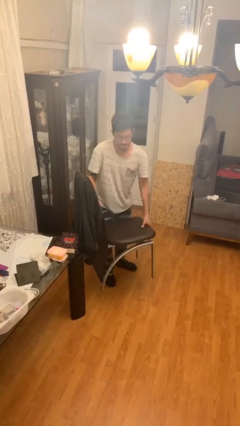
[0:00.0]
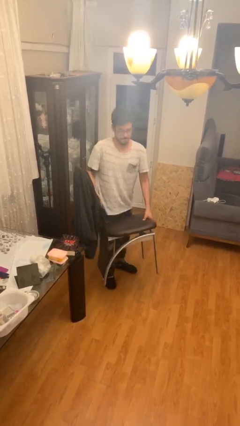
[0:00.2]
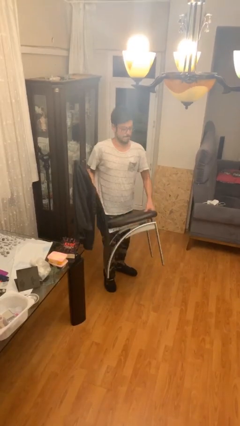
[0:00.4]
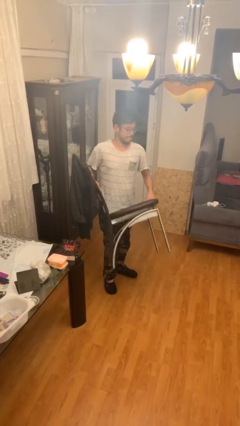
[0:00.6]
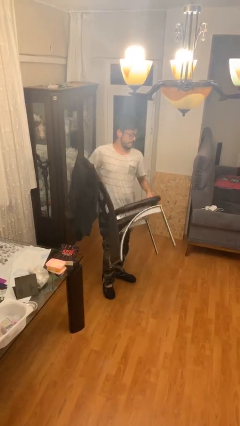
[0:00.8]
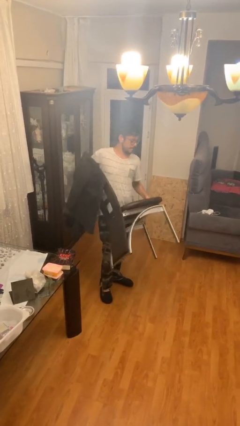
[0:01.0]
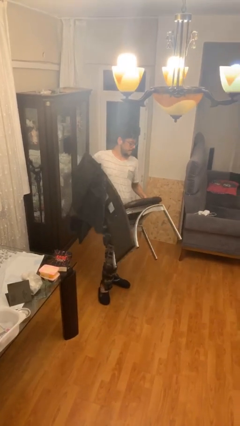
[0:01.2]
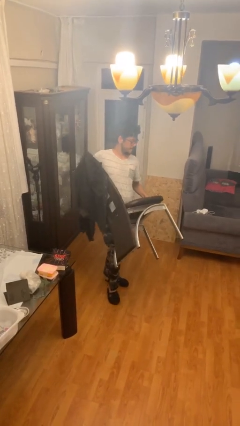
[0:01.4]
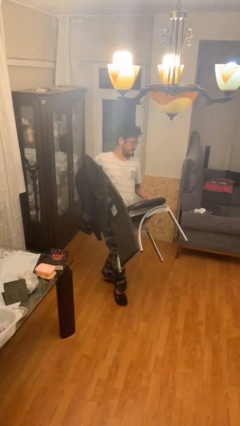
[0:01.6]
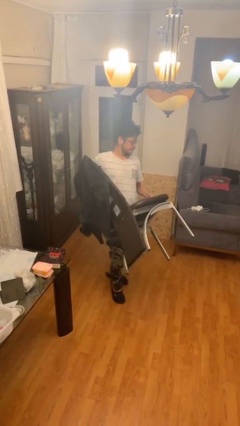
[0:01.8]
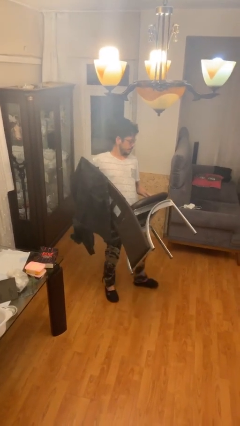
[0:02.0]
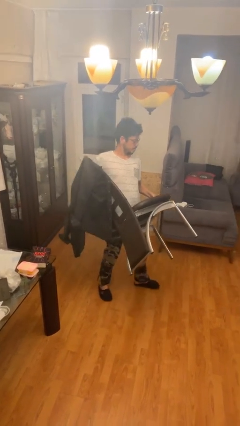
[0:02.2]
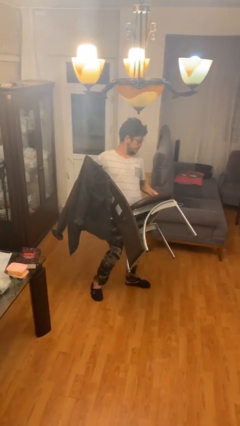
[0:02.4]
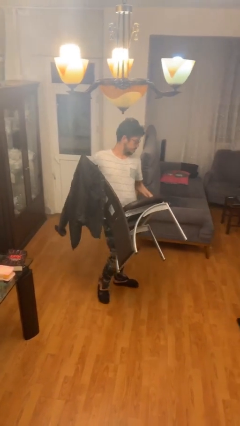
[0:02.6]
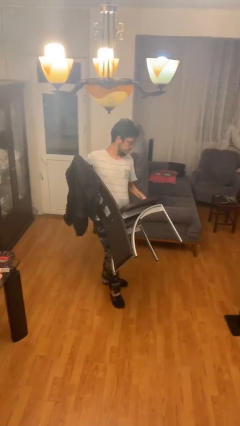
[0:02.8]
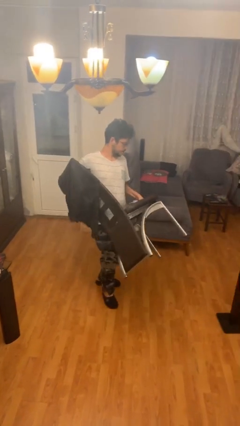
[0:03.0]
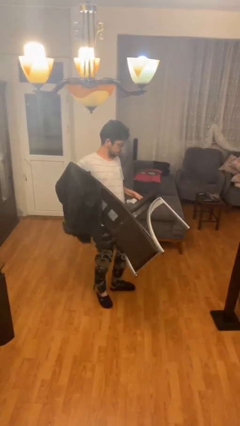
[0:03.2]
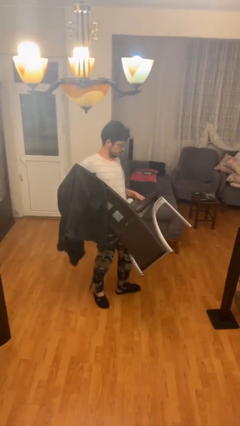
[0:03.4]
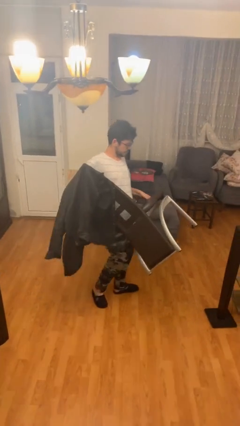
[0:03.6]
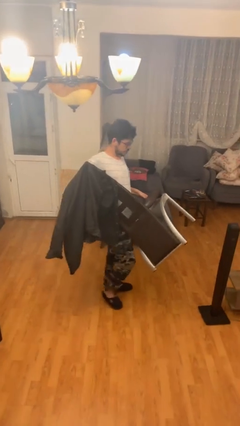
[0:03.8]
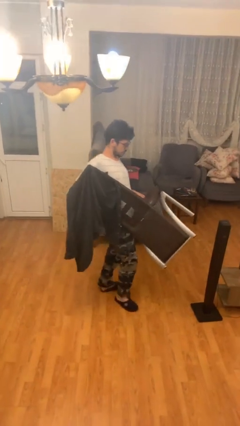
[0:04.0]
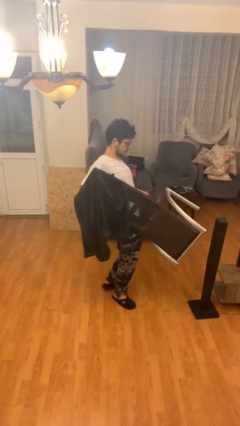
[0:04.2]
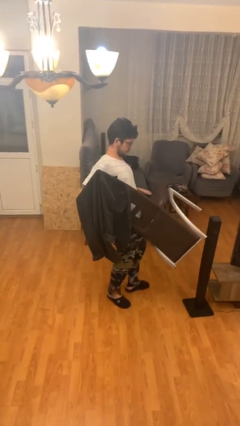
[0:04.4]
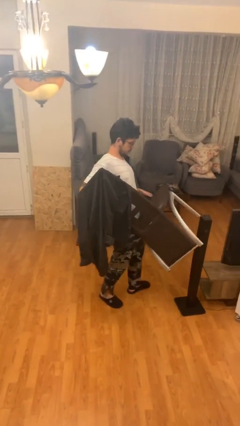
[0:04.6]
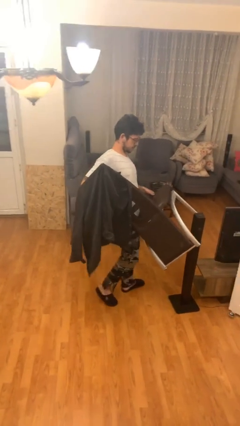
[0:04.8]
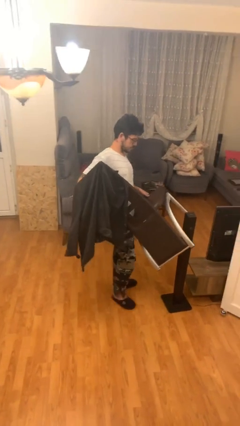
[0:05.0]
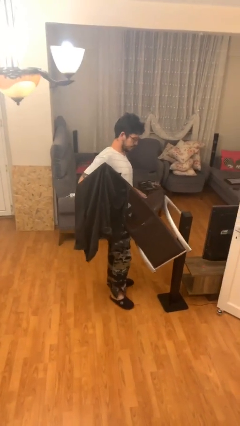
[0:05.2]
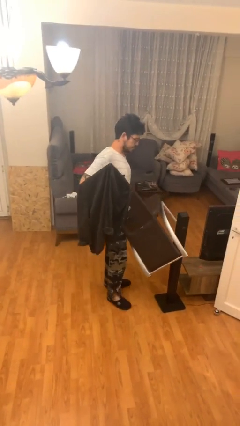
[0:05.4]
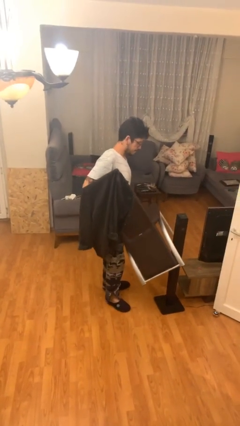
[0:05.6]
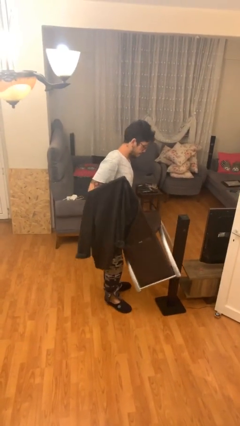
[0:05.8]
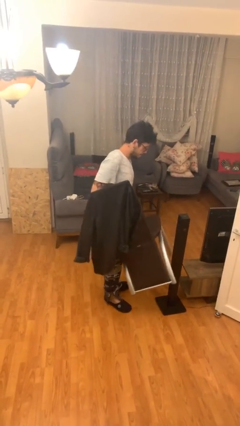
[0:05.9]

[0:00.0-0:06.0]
person carries heavy object

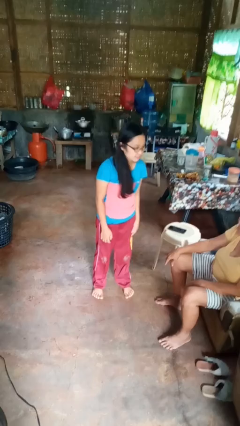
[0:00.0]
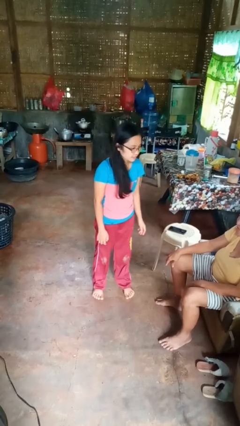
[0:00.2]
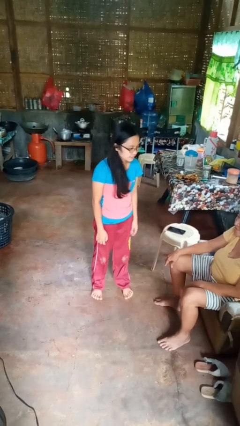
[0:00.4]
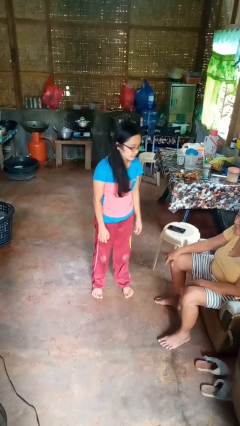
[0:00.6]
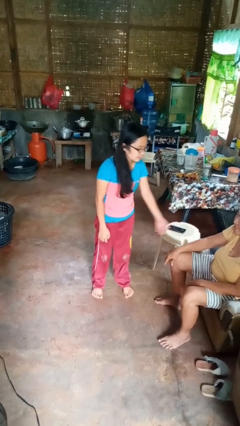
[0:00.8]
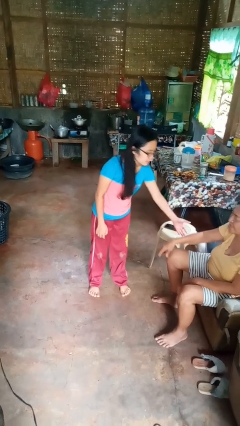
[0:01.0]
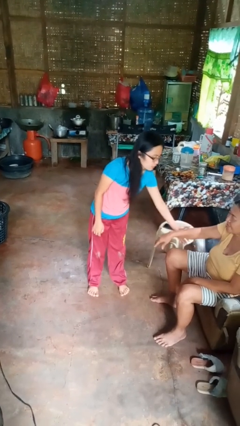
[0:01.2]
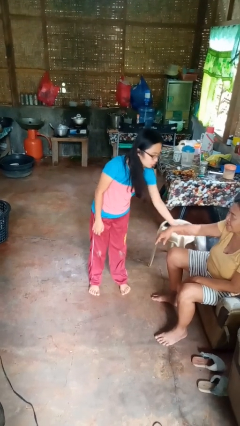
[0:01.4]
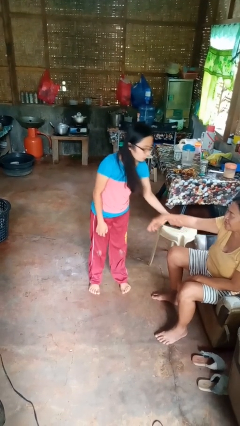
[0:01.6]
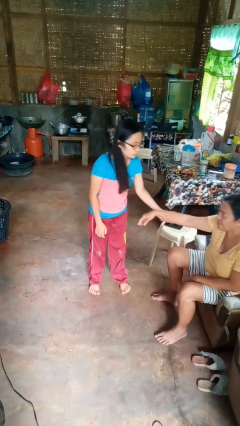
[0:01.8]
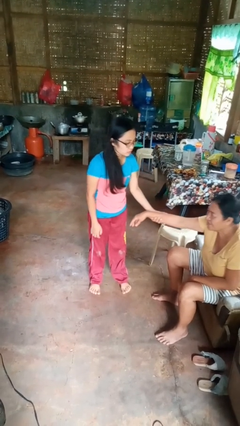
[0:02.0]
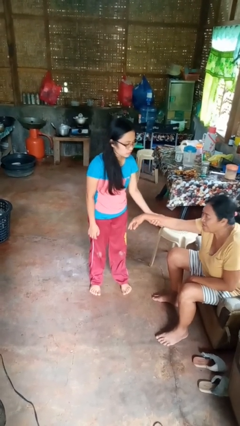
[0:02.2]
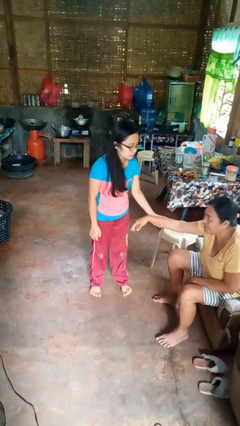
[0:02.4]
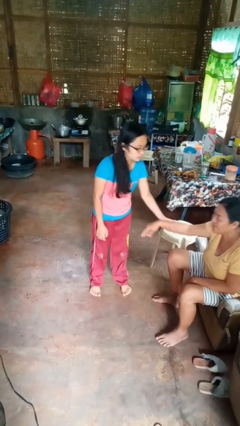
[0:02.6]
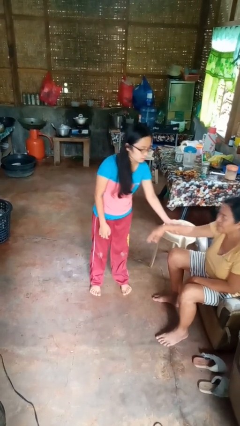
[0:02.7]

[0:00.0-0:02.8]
person grabs person by forearm

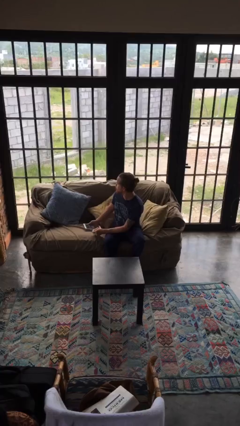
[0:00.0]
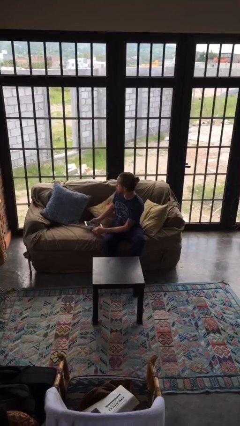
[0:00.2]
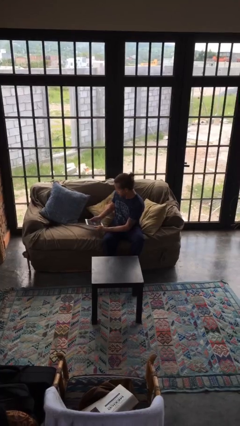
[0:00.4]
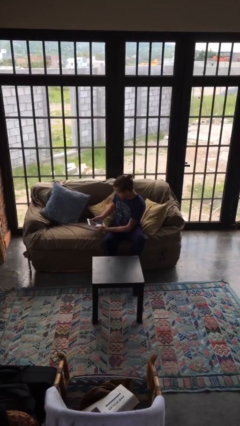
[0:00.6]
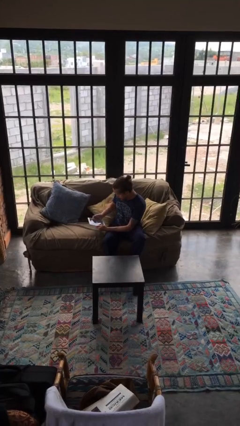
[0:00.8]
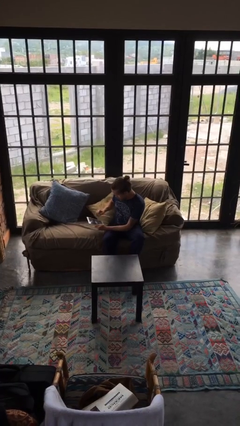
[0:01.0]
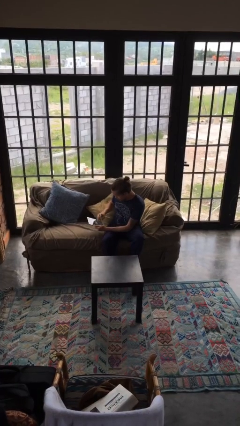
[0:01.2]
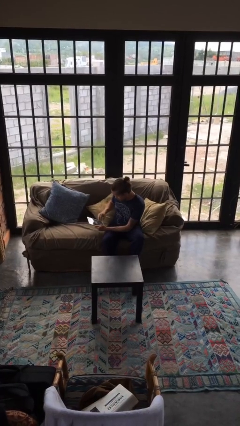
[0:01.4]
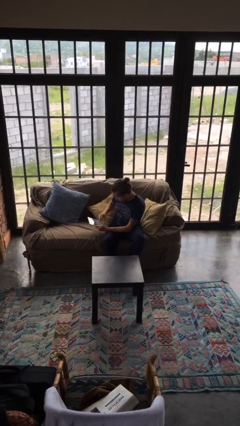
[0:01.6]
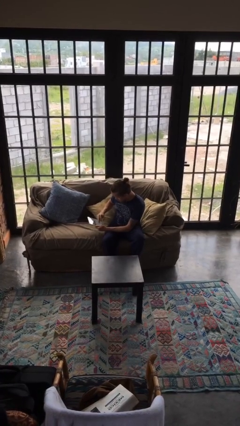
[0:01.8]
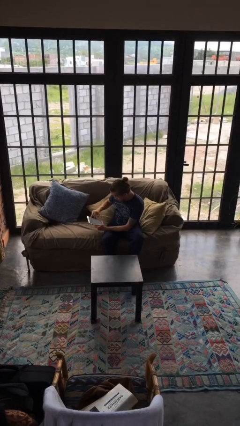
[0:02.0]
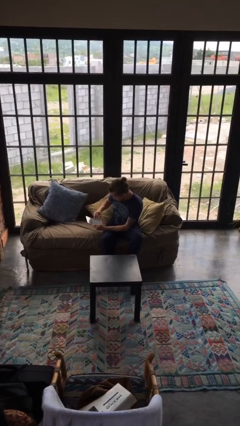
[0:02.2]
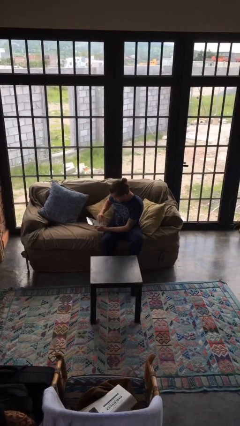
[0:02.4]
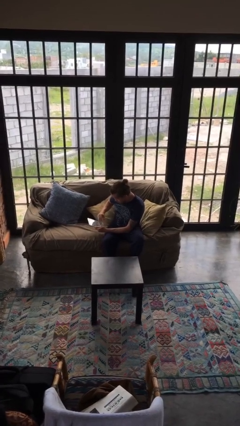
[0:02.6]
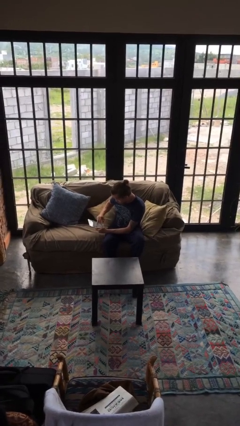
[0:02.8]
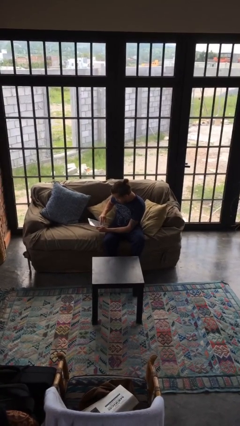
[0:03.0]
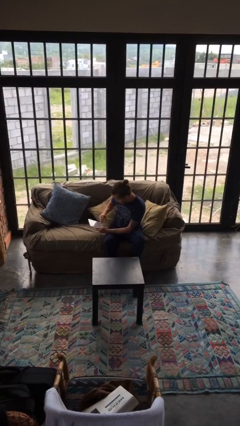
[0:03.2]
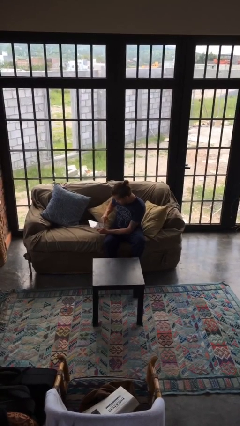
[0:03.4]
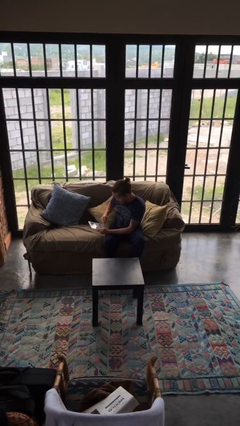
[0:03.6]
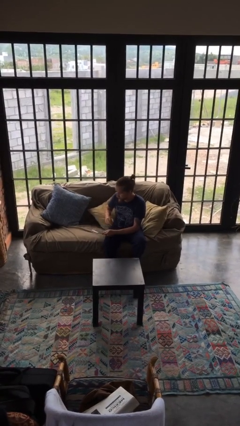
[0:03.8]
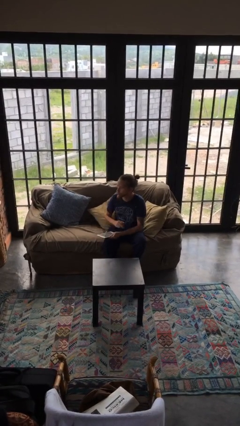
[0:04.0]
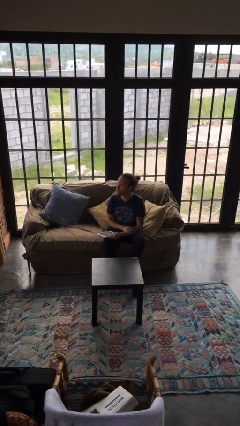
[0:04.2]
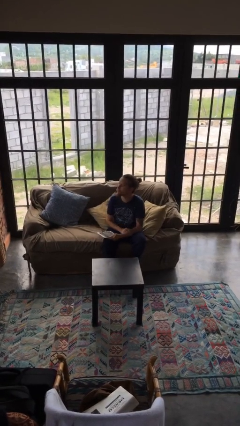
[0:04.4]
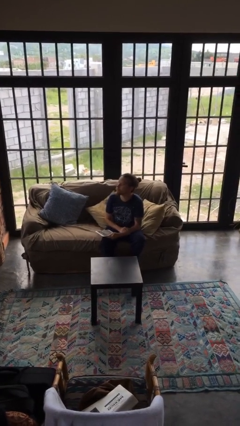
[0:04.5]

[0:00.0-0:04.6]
person interacts with tablet

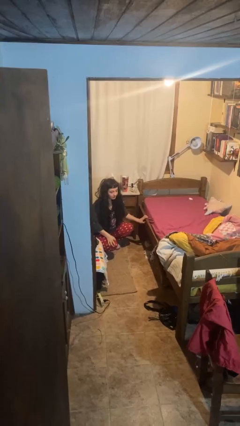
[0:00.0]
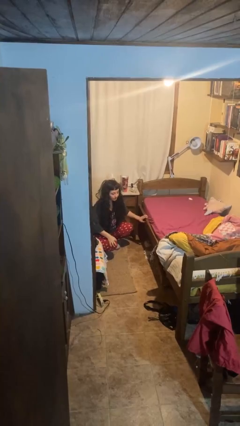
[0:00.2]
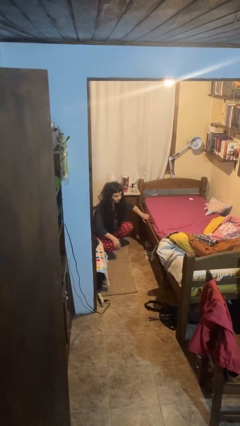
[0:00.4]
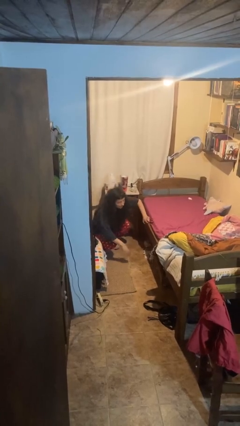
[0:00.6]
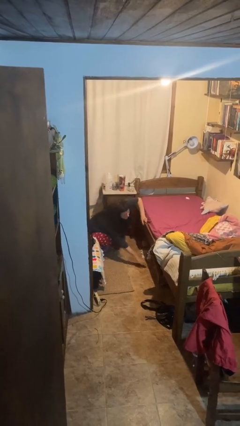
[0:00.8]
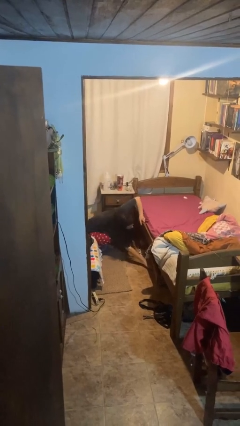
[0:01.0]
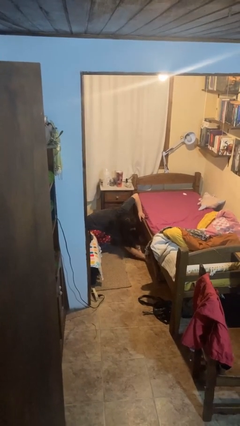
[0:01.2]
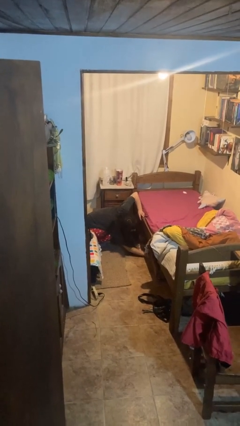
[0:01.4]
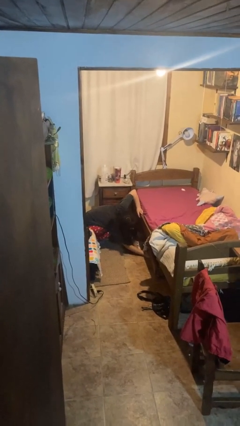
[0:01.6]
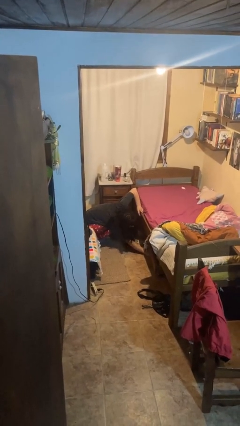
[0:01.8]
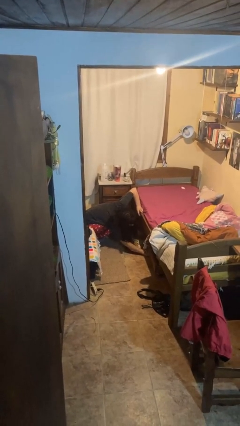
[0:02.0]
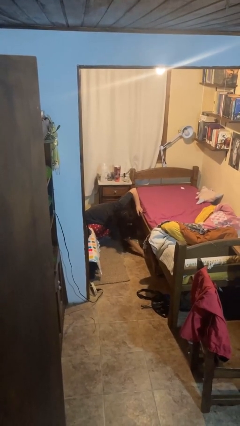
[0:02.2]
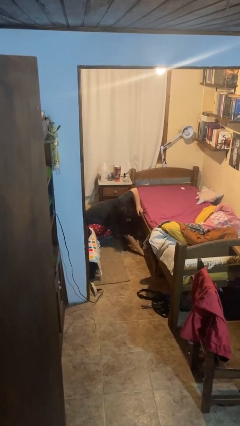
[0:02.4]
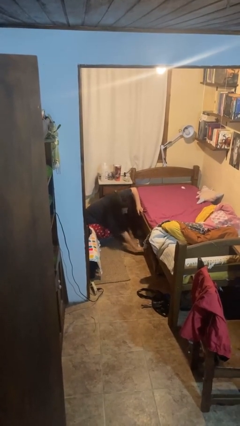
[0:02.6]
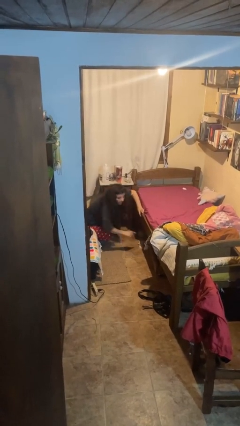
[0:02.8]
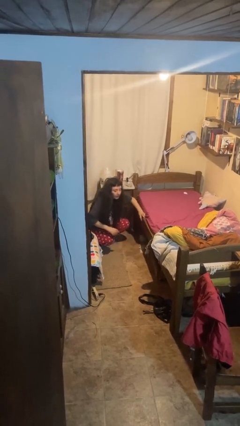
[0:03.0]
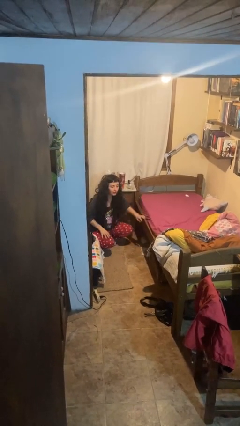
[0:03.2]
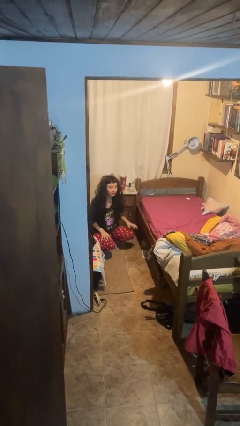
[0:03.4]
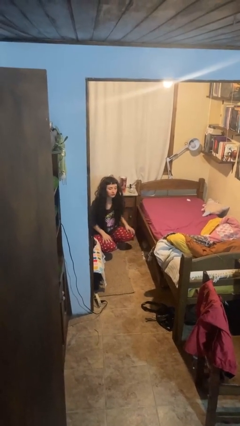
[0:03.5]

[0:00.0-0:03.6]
person searches under bed

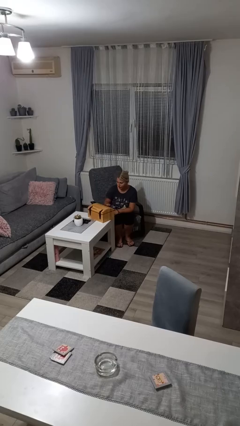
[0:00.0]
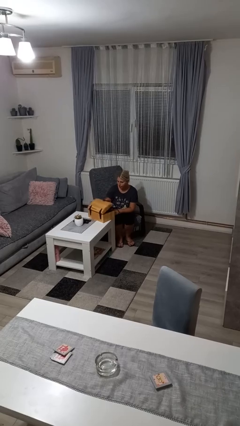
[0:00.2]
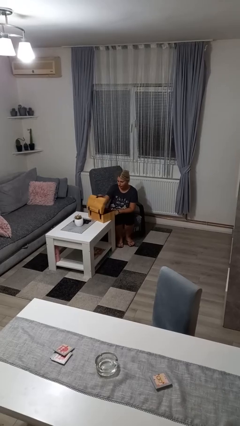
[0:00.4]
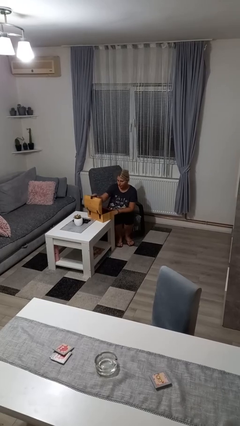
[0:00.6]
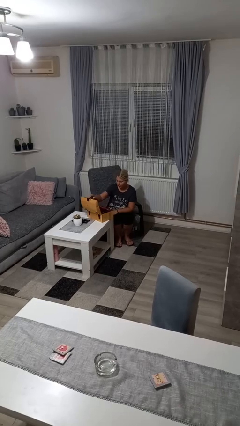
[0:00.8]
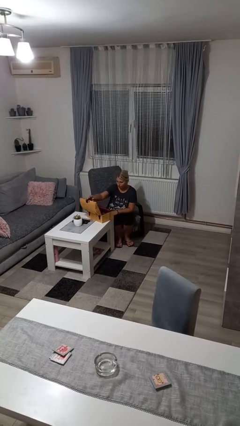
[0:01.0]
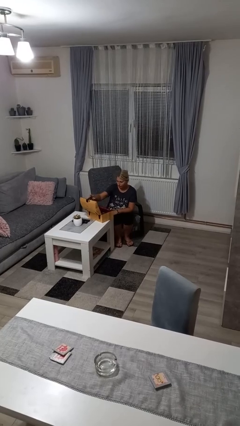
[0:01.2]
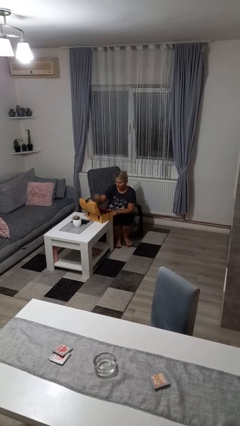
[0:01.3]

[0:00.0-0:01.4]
person opens jewelry box
